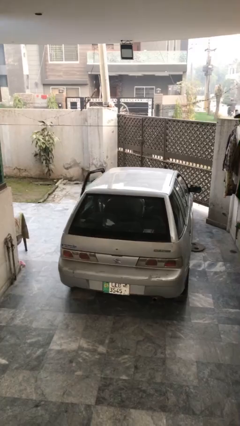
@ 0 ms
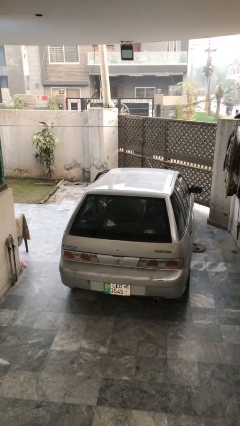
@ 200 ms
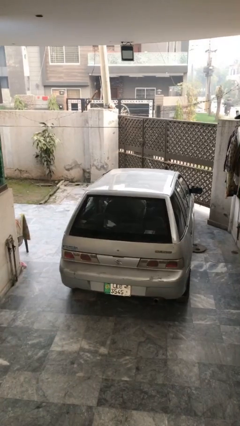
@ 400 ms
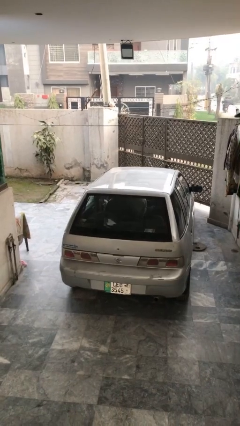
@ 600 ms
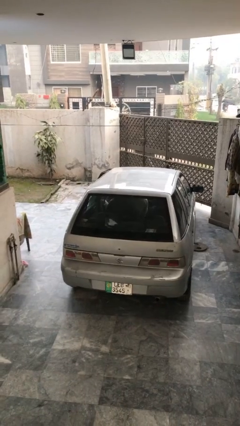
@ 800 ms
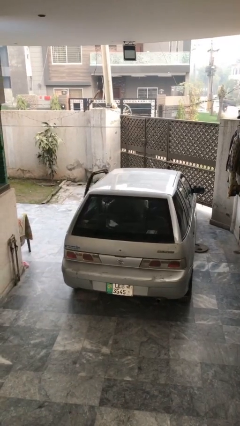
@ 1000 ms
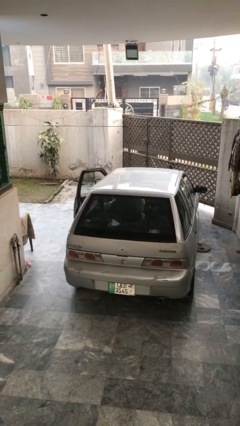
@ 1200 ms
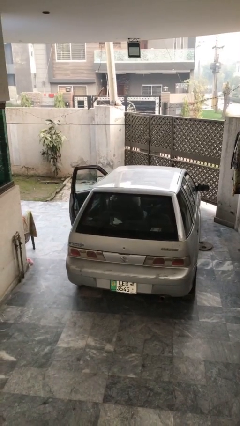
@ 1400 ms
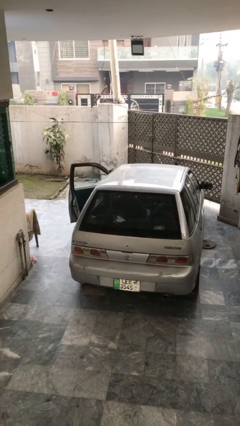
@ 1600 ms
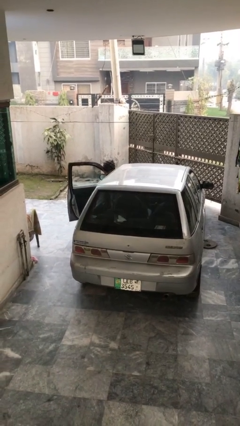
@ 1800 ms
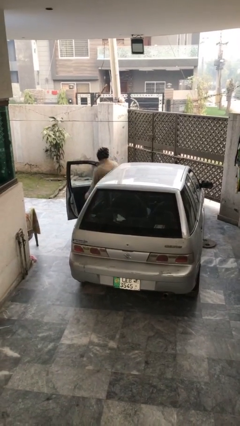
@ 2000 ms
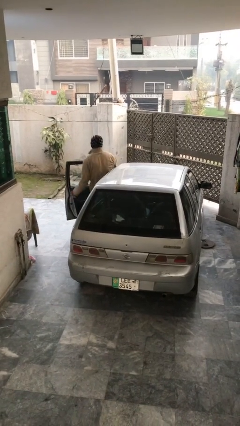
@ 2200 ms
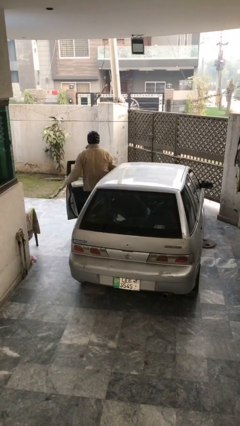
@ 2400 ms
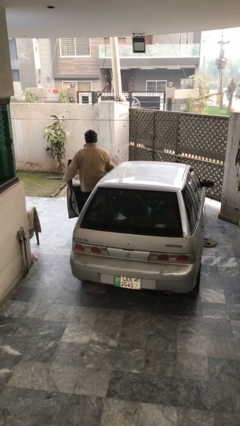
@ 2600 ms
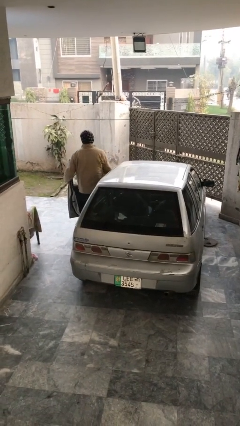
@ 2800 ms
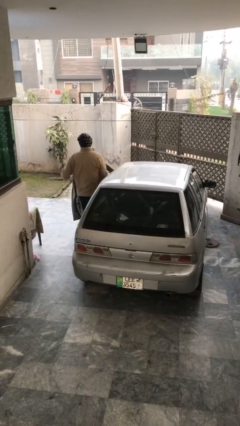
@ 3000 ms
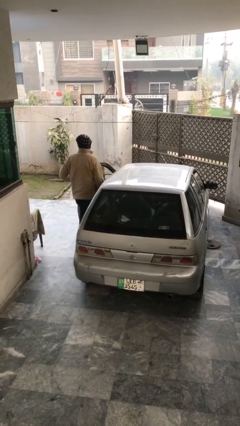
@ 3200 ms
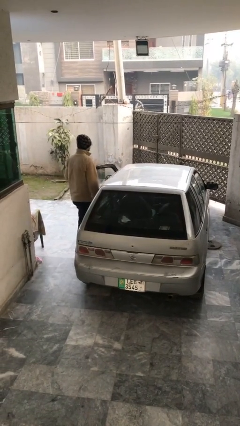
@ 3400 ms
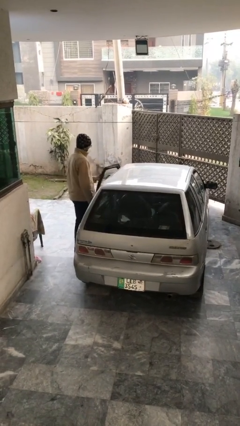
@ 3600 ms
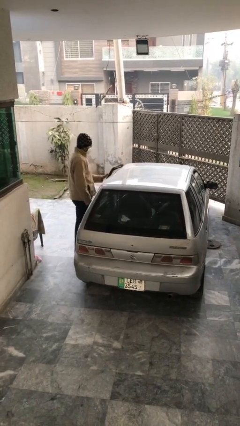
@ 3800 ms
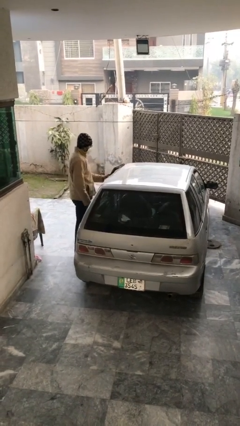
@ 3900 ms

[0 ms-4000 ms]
car drops off person

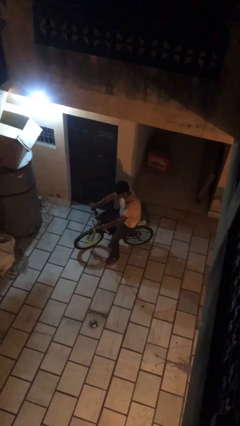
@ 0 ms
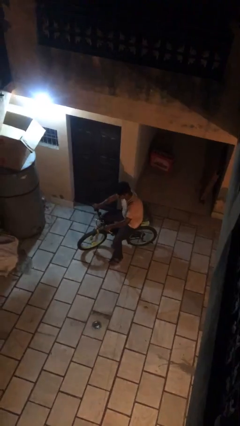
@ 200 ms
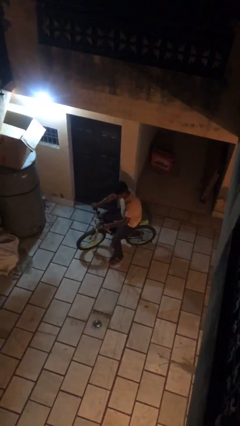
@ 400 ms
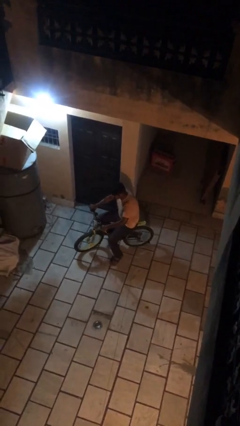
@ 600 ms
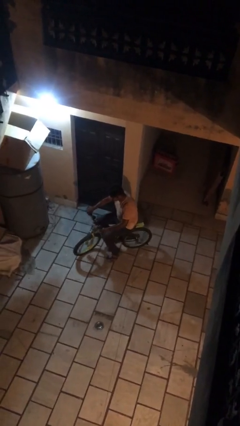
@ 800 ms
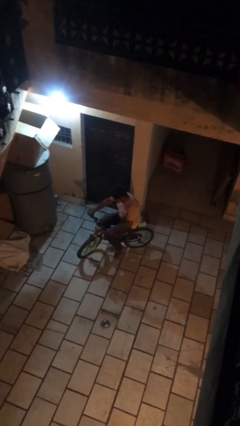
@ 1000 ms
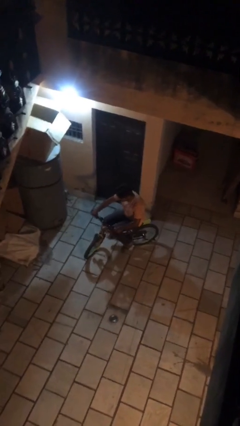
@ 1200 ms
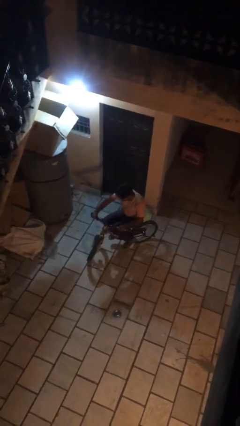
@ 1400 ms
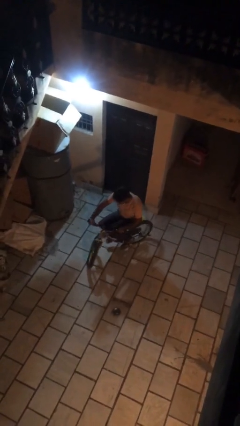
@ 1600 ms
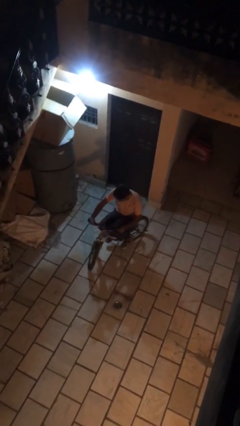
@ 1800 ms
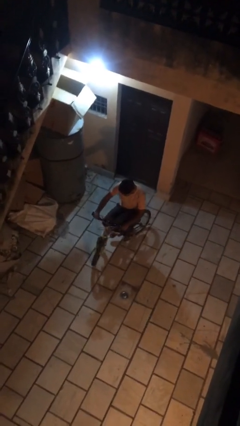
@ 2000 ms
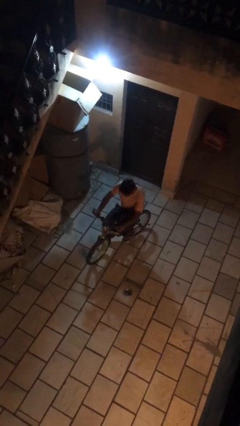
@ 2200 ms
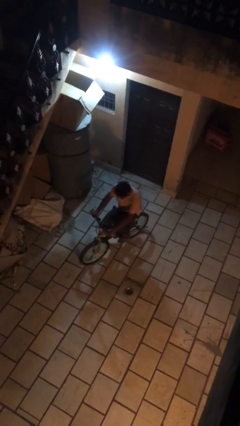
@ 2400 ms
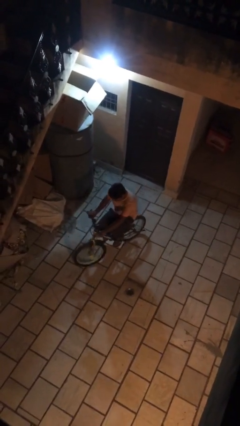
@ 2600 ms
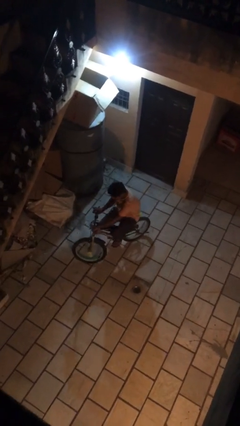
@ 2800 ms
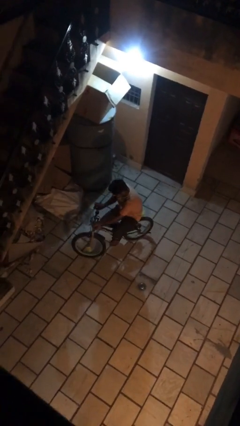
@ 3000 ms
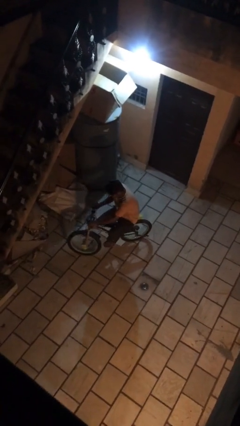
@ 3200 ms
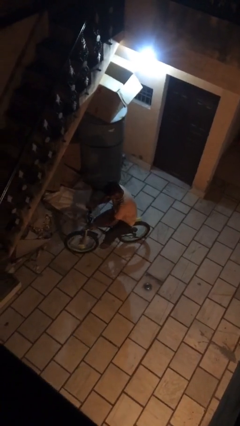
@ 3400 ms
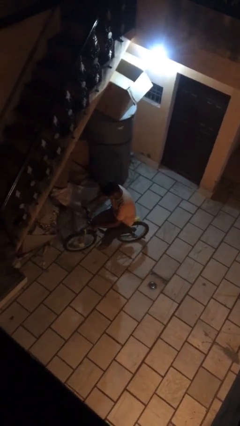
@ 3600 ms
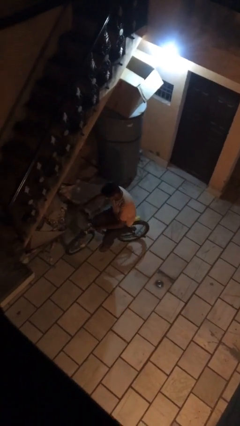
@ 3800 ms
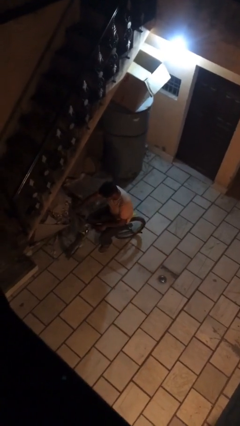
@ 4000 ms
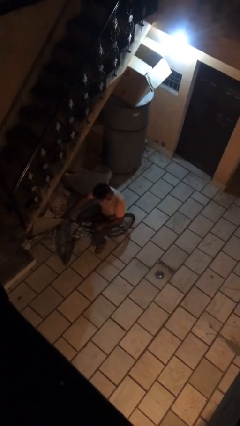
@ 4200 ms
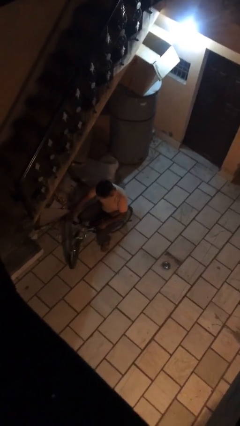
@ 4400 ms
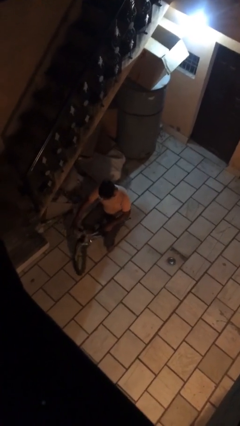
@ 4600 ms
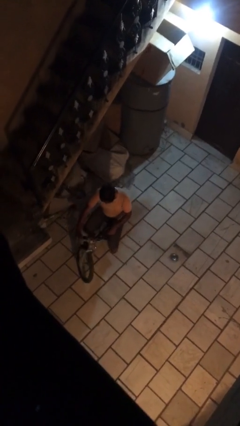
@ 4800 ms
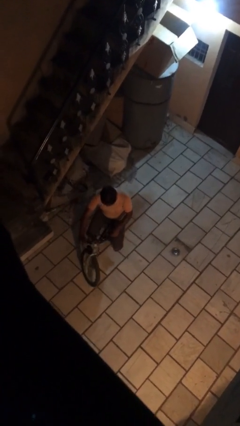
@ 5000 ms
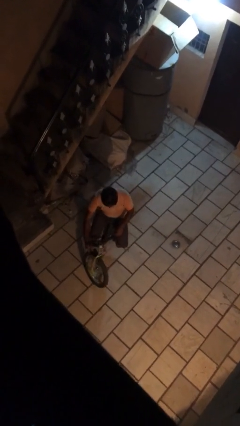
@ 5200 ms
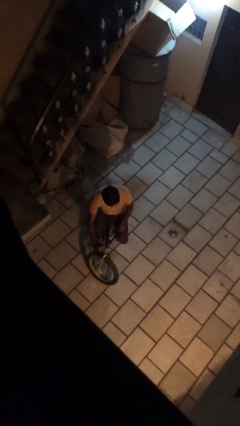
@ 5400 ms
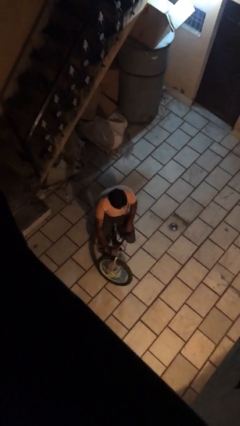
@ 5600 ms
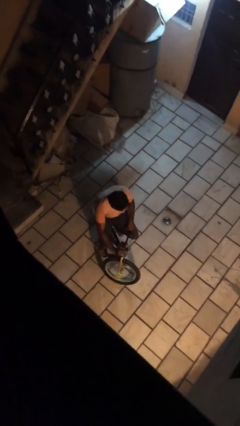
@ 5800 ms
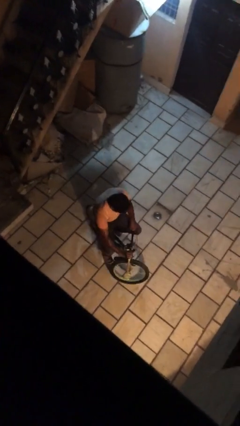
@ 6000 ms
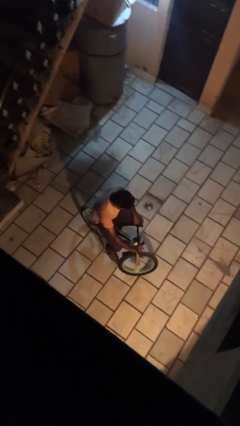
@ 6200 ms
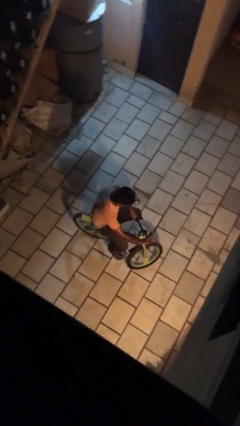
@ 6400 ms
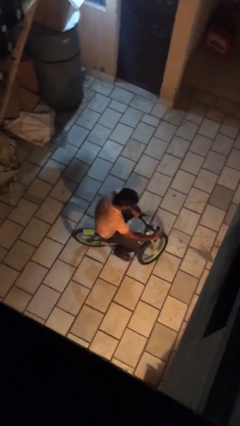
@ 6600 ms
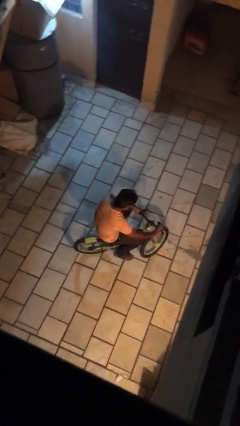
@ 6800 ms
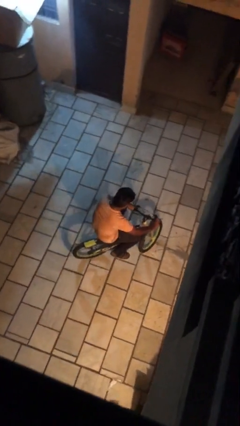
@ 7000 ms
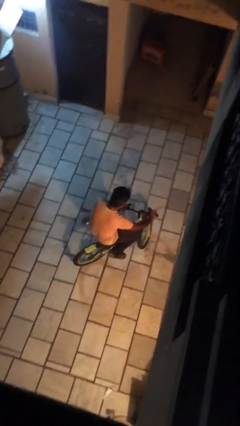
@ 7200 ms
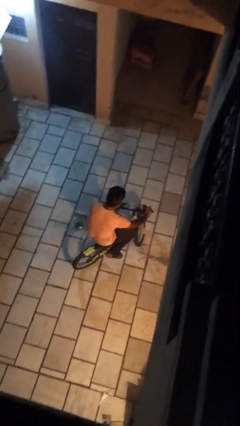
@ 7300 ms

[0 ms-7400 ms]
person rides bicycle

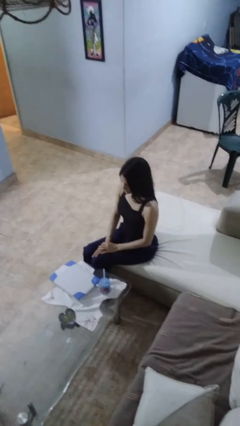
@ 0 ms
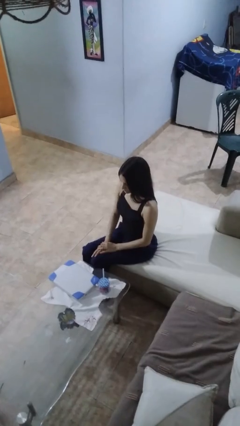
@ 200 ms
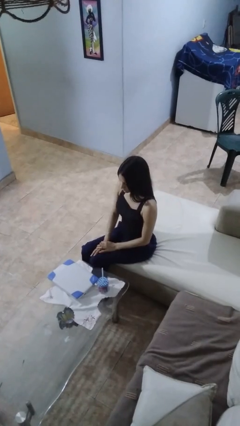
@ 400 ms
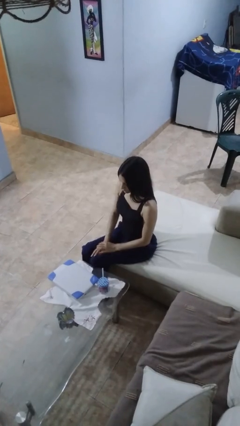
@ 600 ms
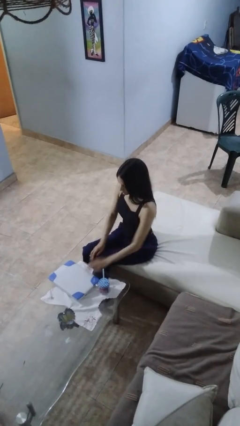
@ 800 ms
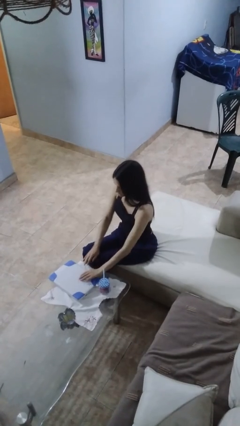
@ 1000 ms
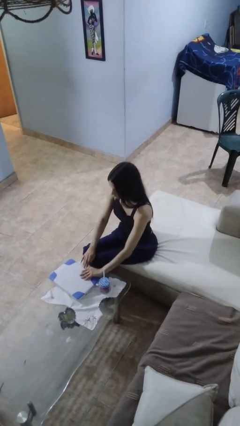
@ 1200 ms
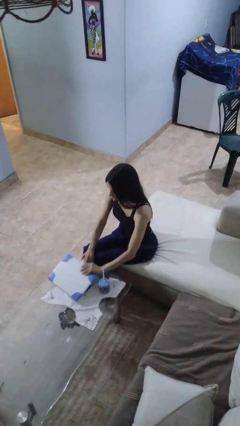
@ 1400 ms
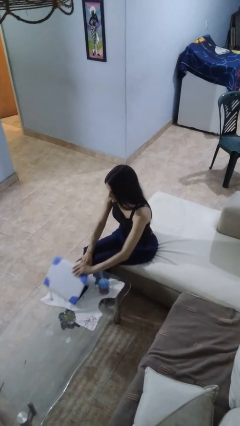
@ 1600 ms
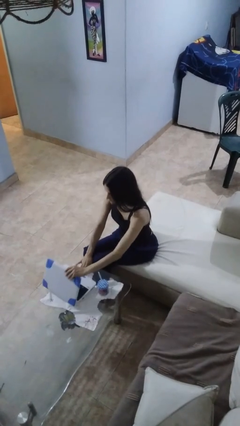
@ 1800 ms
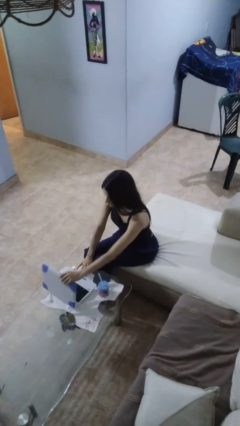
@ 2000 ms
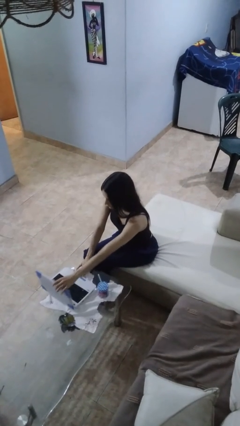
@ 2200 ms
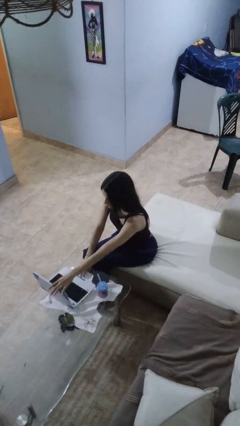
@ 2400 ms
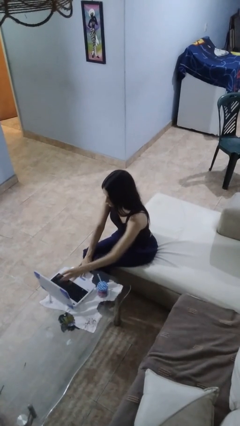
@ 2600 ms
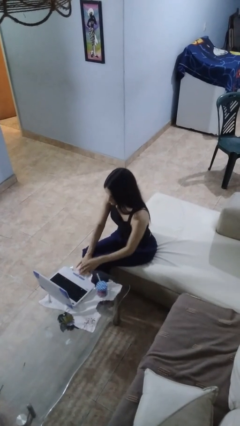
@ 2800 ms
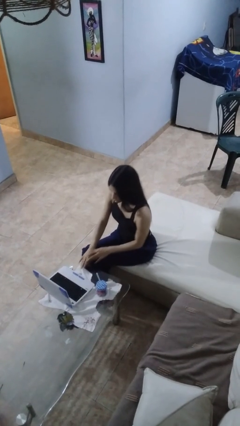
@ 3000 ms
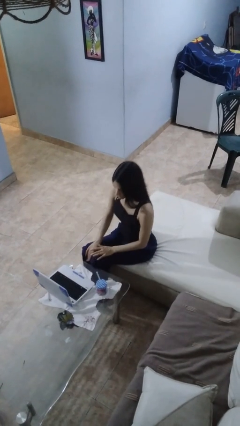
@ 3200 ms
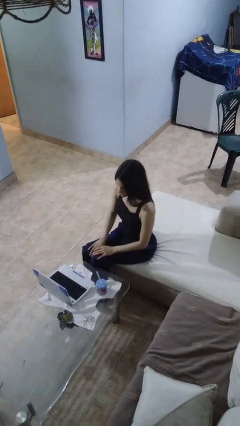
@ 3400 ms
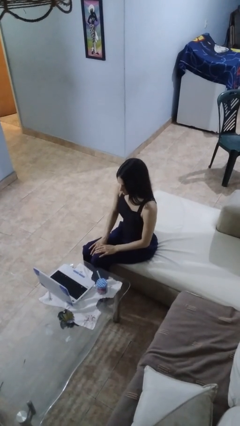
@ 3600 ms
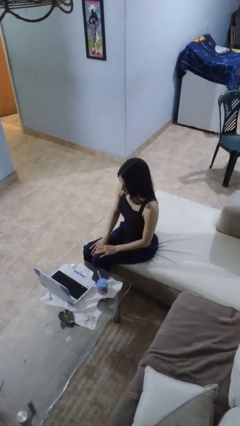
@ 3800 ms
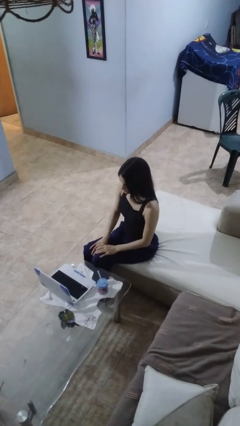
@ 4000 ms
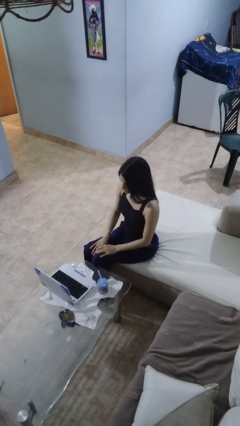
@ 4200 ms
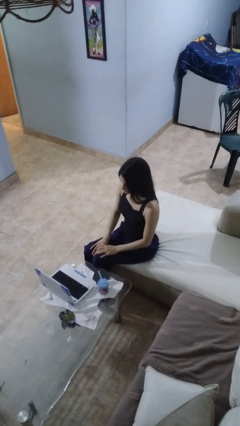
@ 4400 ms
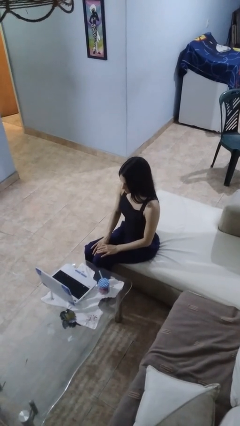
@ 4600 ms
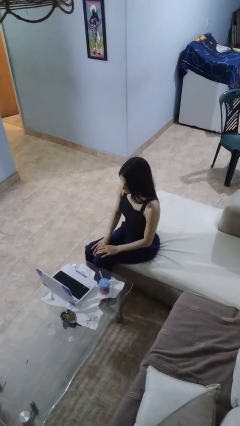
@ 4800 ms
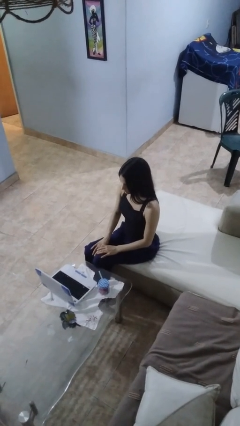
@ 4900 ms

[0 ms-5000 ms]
person opens laptop

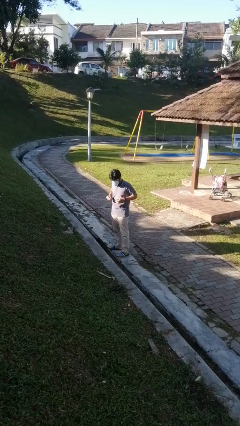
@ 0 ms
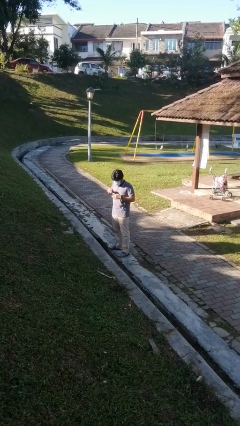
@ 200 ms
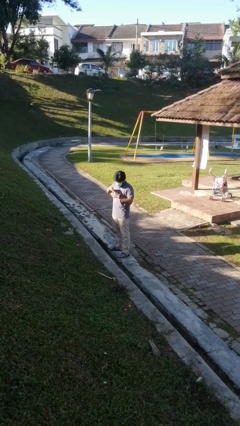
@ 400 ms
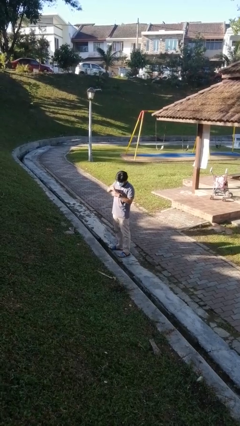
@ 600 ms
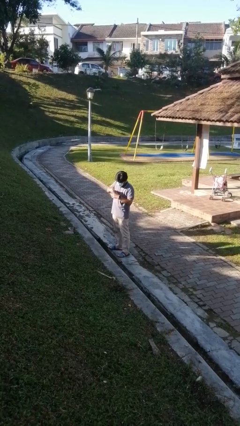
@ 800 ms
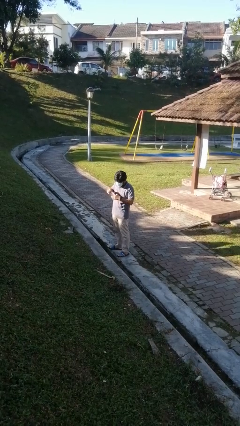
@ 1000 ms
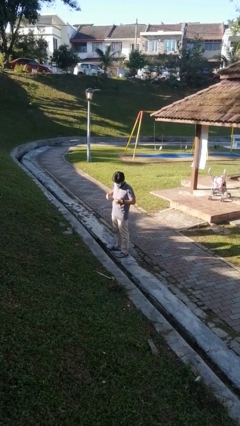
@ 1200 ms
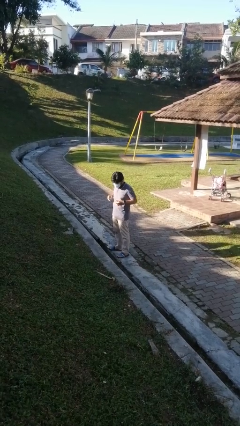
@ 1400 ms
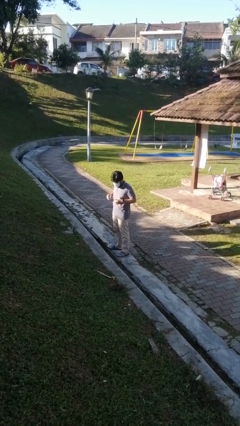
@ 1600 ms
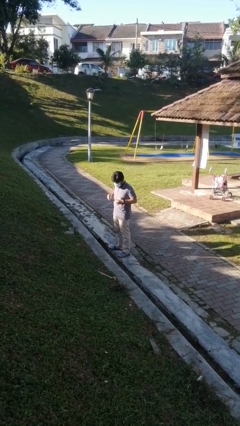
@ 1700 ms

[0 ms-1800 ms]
person puts on ring
